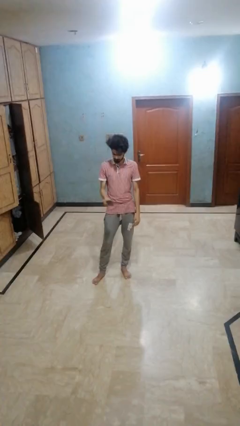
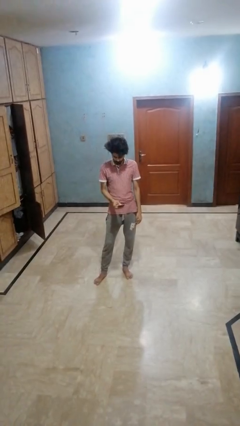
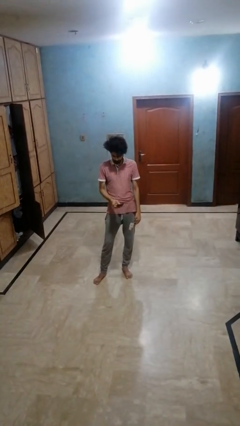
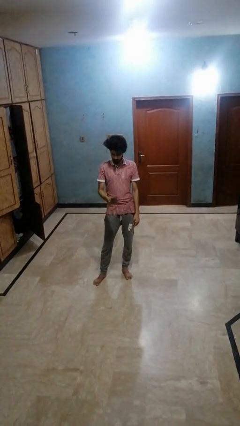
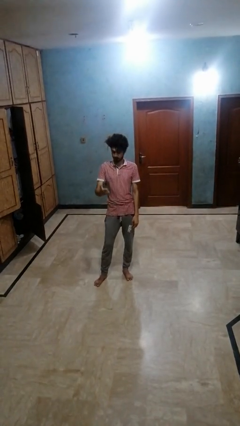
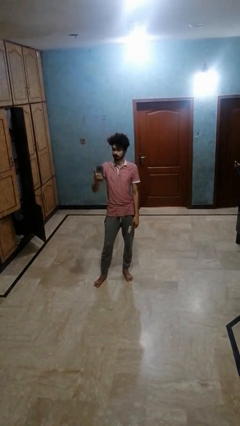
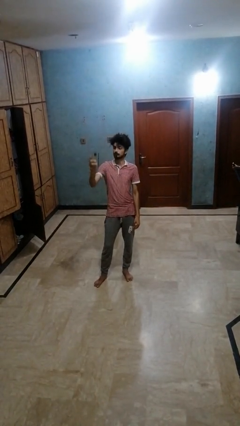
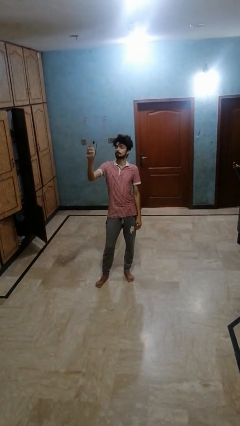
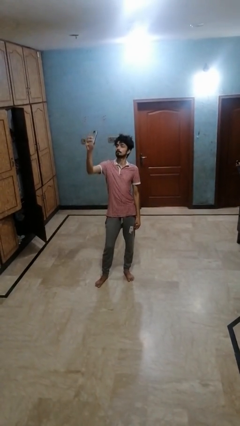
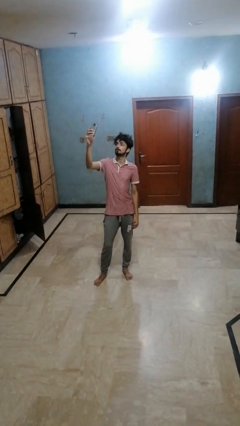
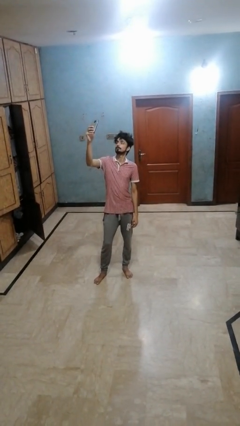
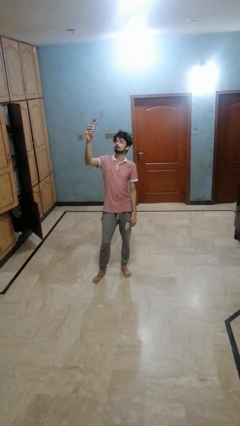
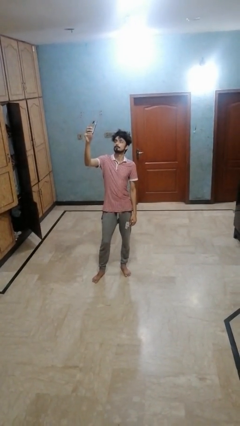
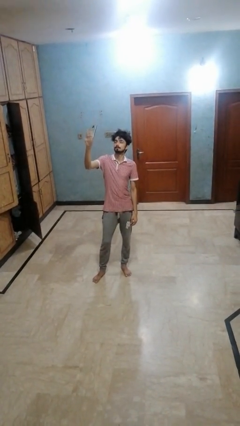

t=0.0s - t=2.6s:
person takes selfie

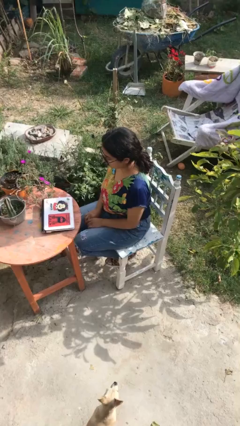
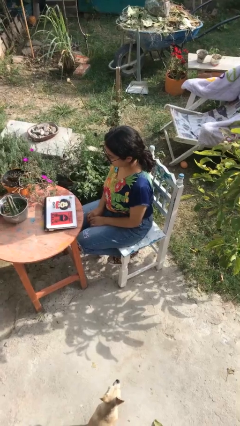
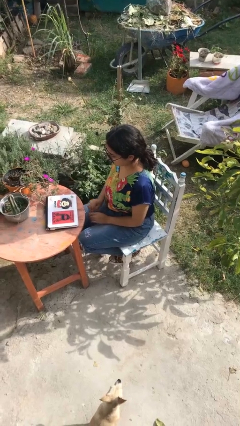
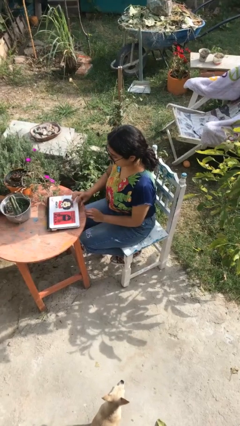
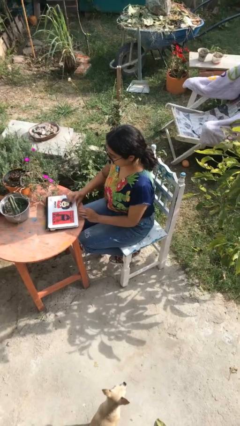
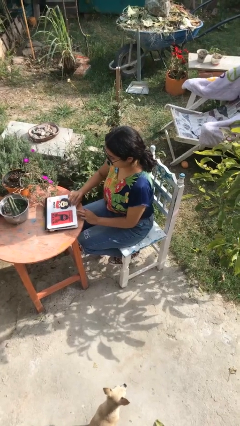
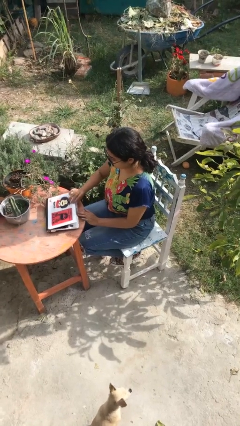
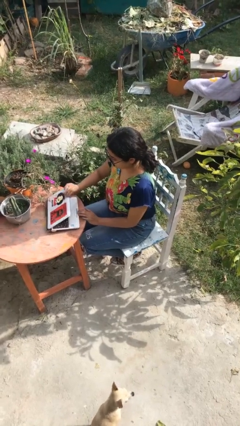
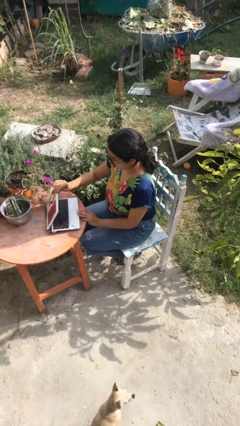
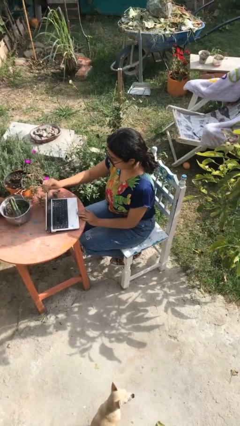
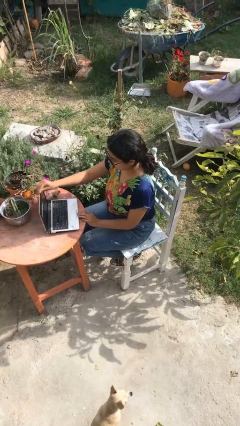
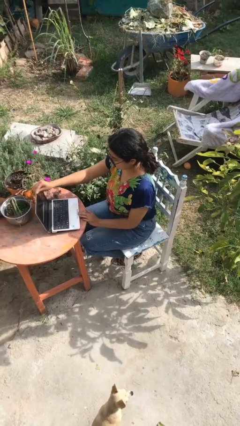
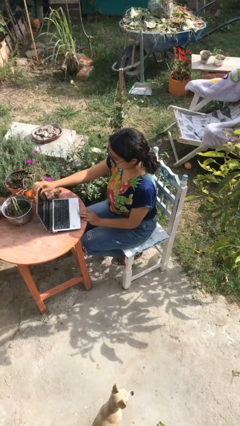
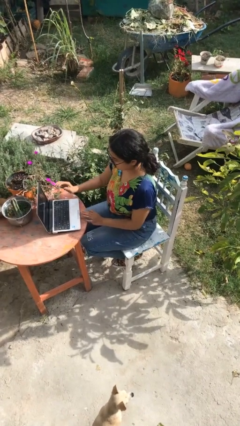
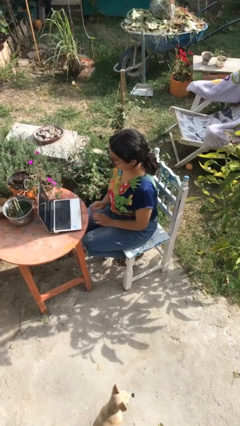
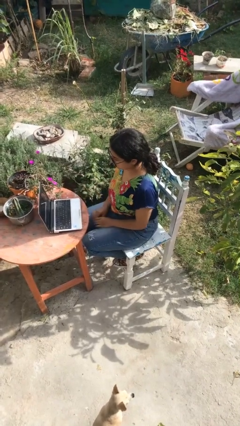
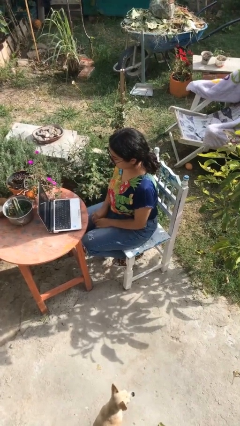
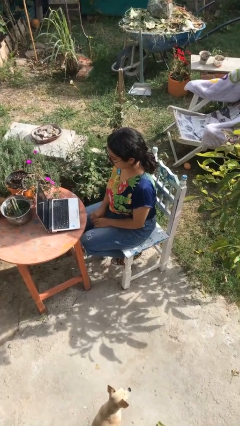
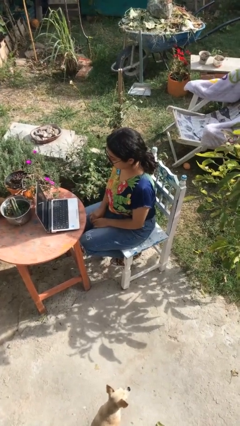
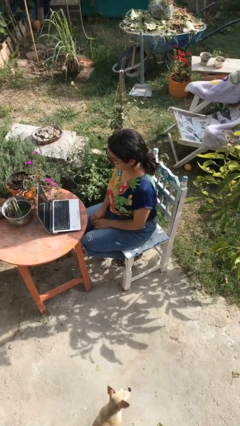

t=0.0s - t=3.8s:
person opens laptop

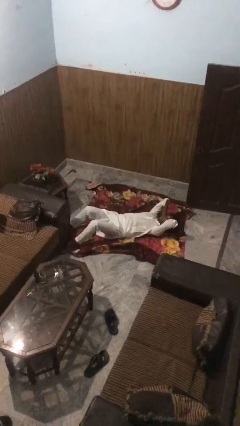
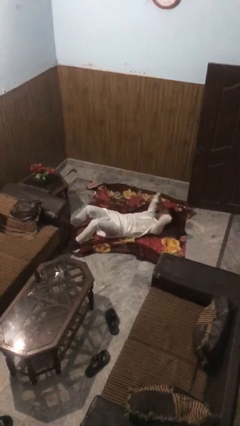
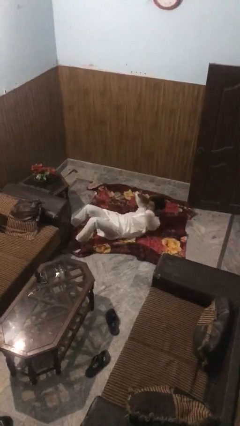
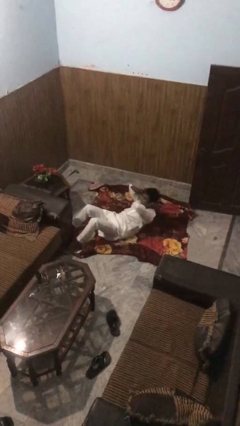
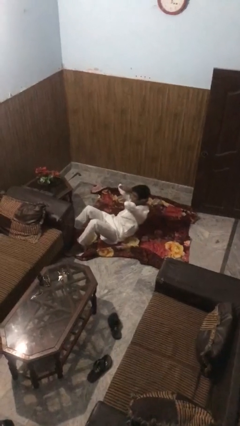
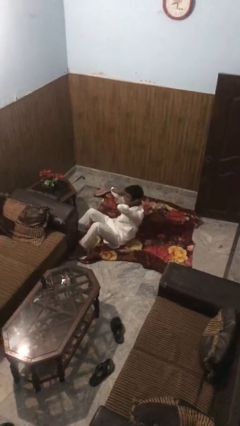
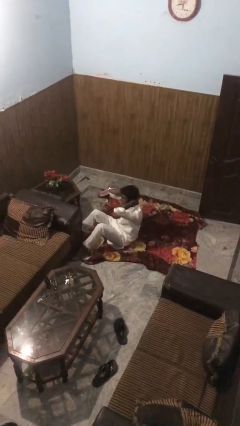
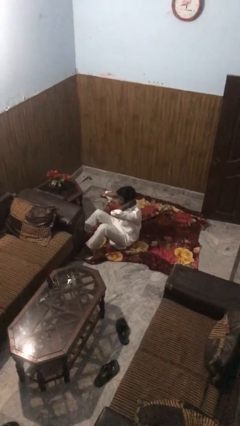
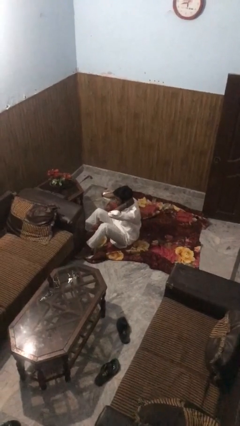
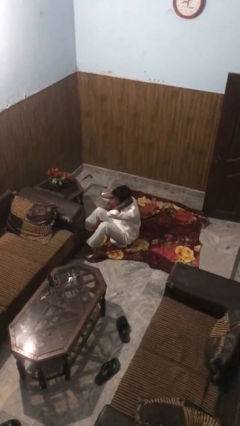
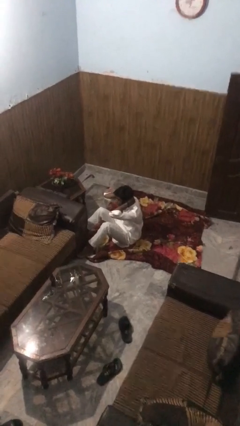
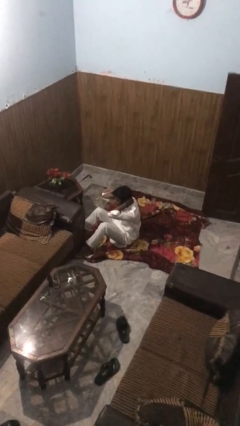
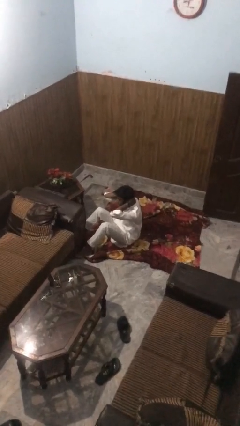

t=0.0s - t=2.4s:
person exercises with situp

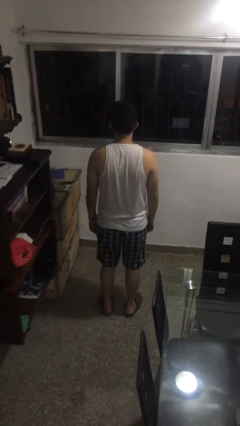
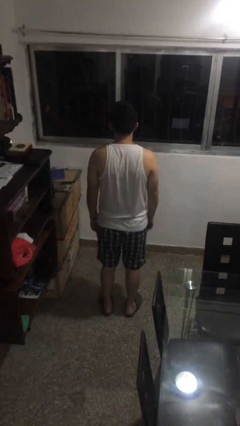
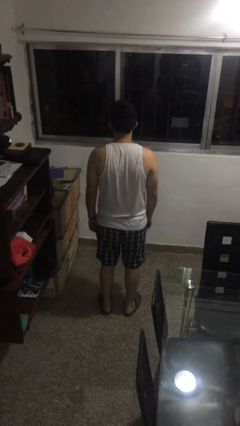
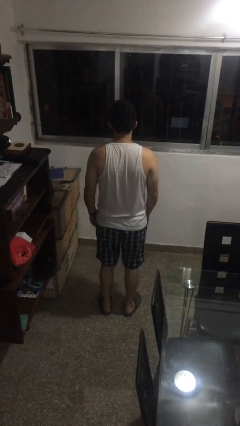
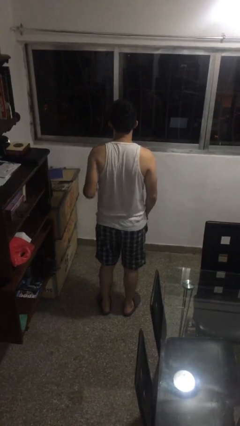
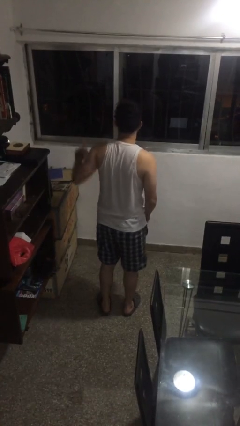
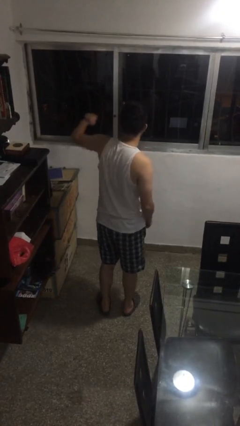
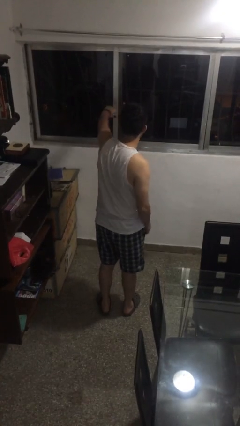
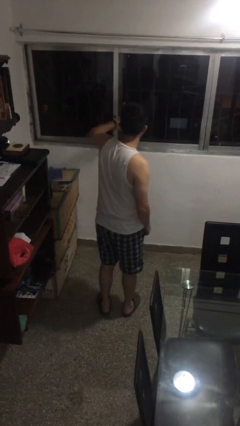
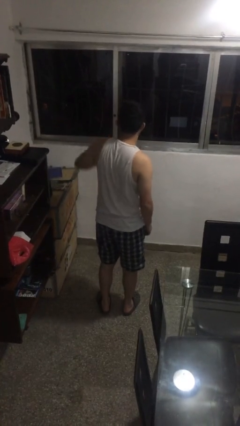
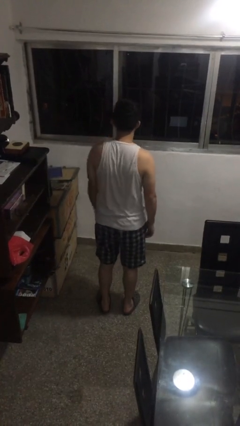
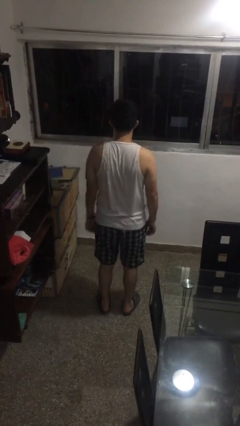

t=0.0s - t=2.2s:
person punches

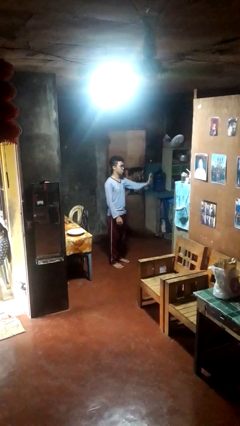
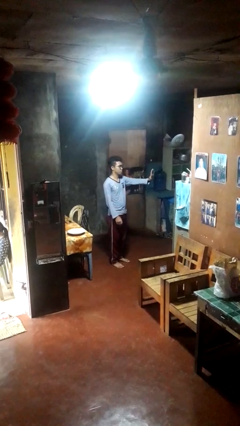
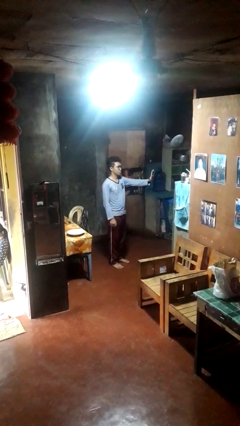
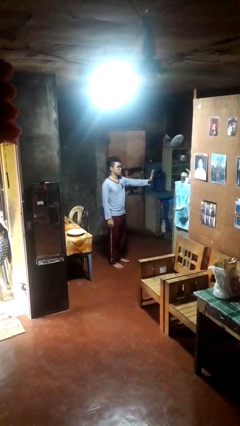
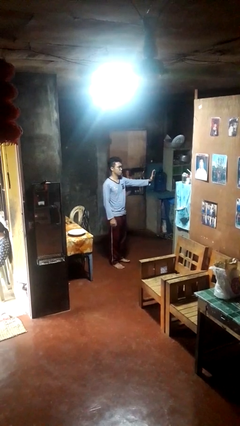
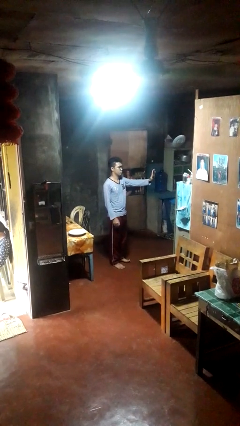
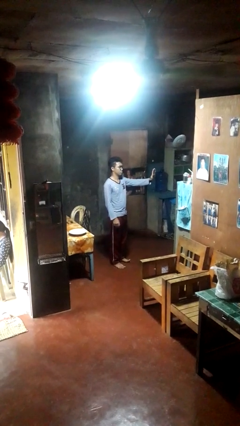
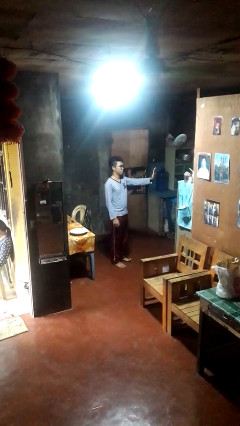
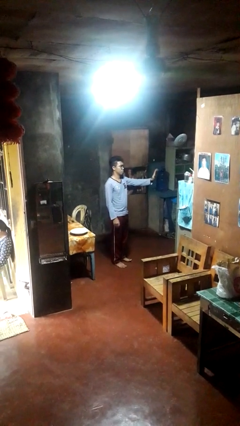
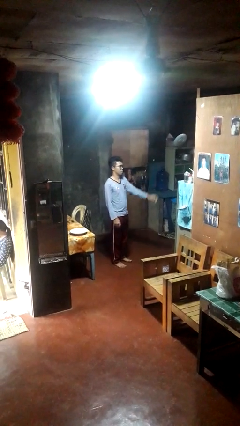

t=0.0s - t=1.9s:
person gestures stop

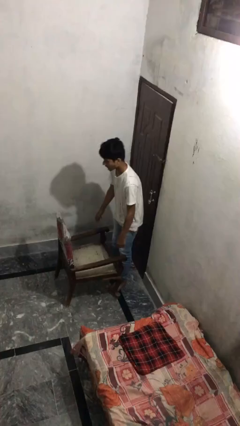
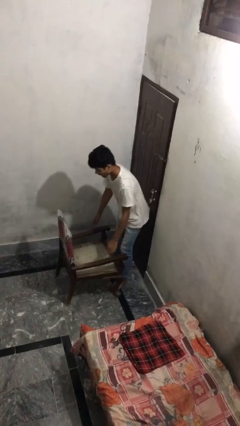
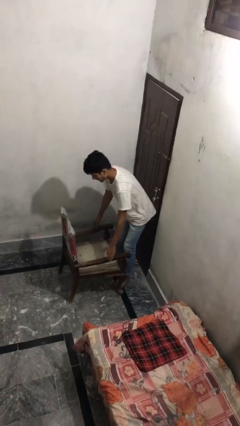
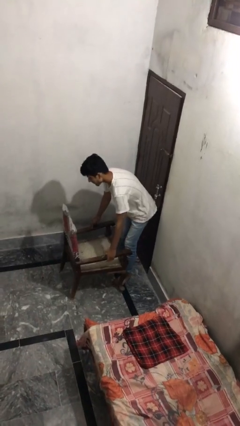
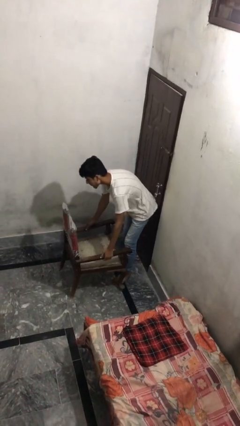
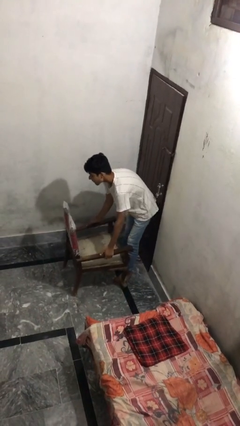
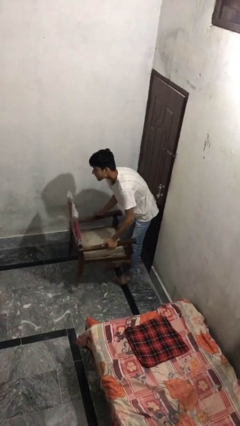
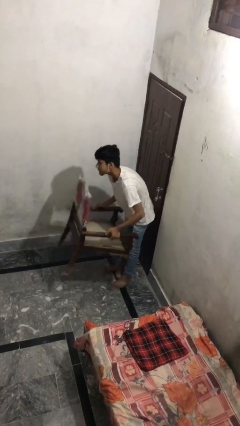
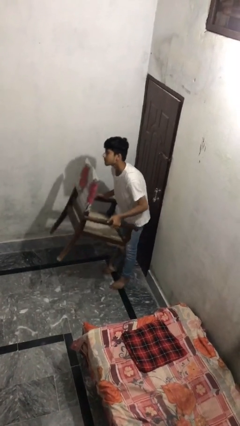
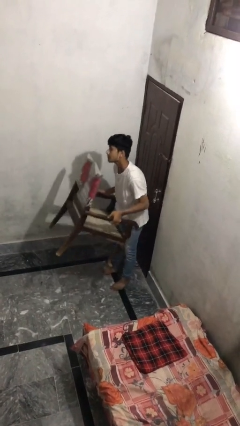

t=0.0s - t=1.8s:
person picks up object from floor

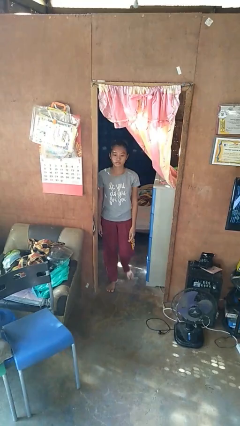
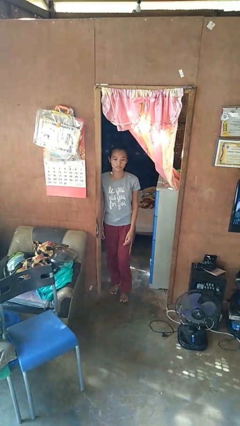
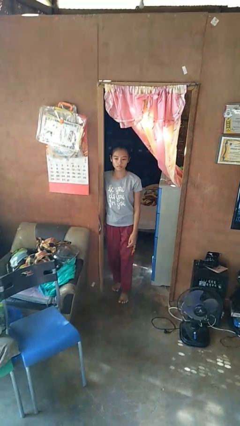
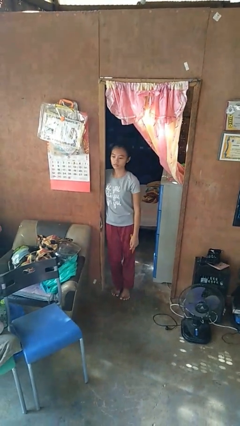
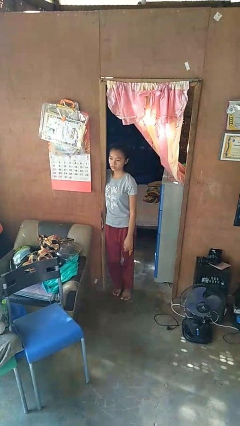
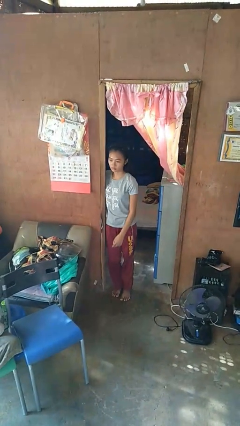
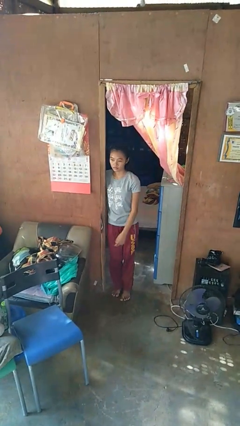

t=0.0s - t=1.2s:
person bumps into wall

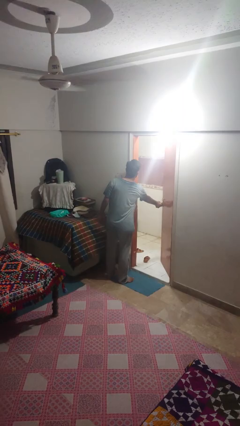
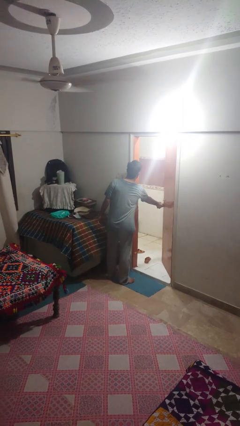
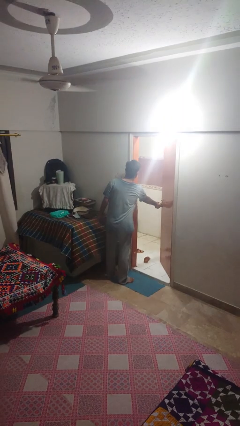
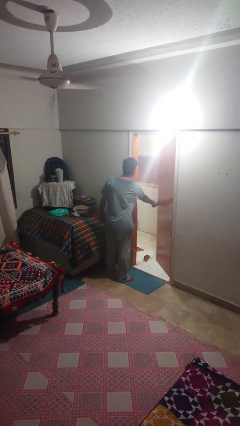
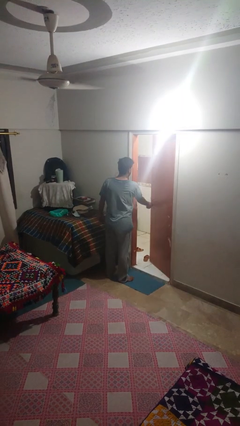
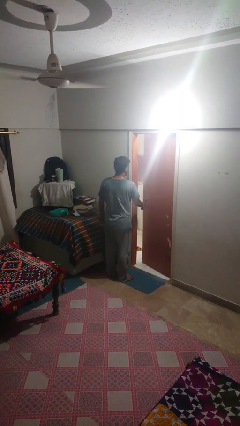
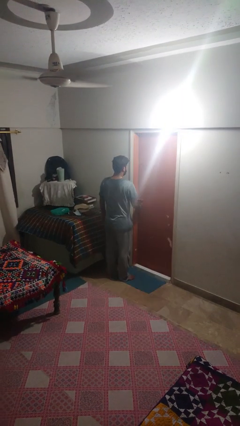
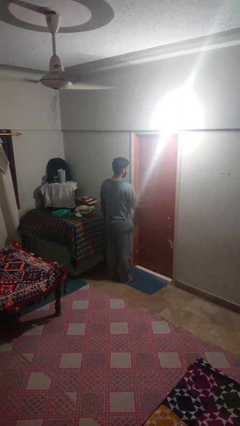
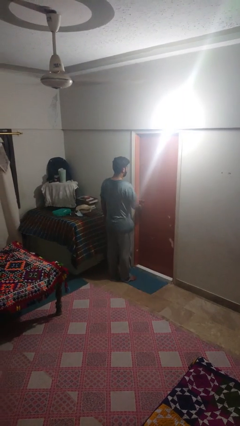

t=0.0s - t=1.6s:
person closes facility door
